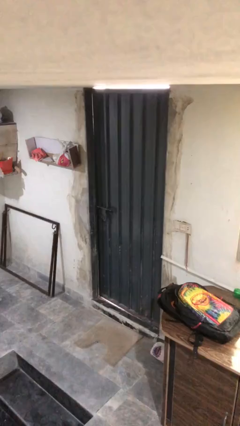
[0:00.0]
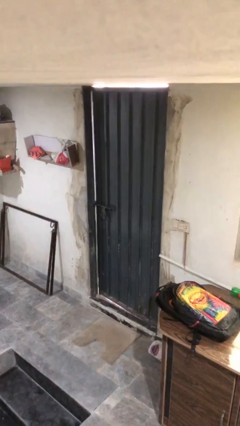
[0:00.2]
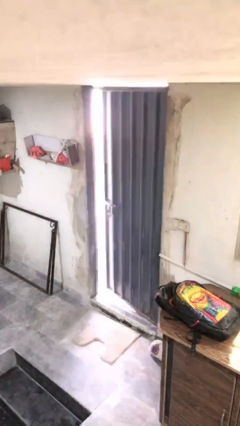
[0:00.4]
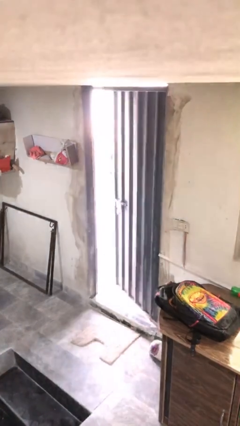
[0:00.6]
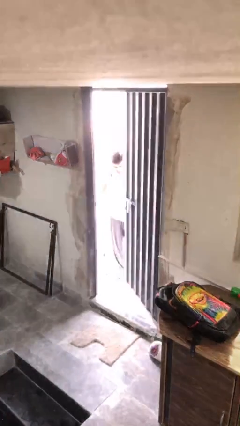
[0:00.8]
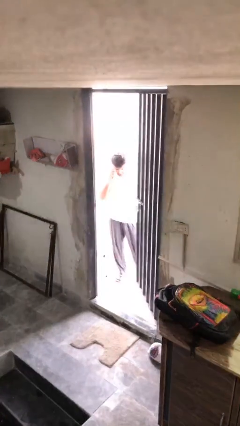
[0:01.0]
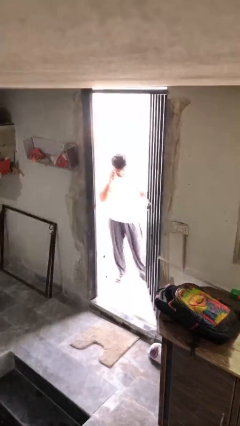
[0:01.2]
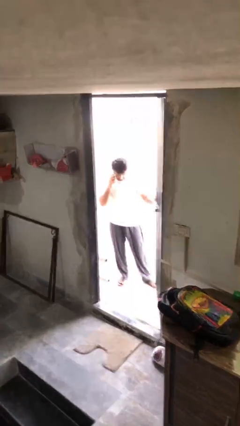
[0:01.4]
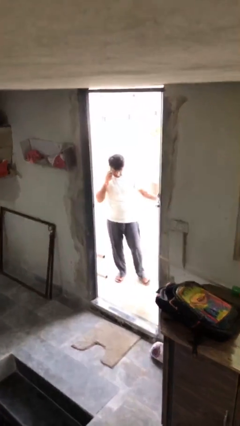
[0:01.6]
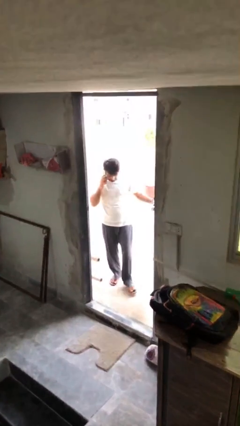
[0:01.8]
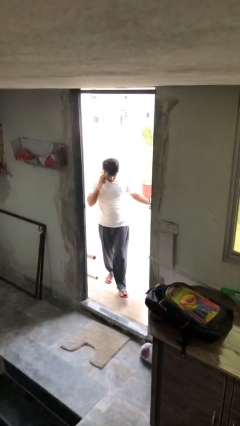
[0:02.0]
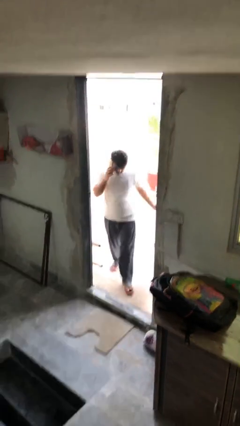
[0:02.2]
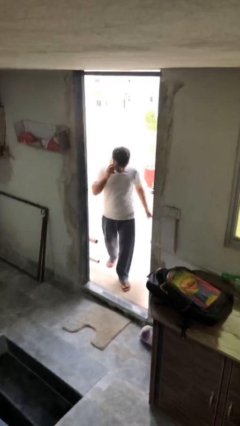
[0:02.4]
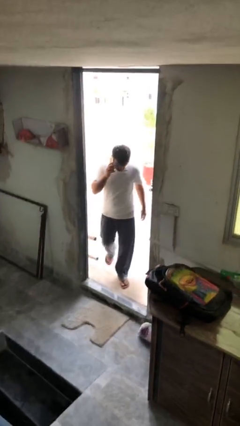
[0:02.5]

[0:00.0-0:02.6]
person opens facility door

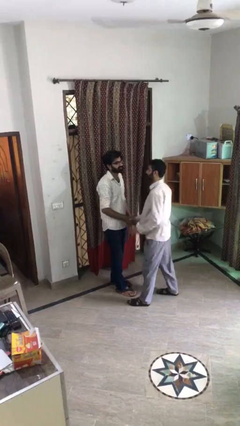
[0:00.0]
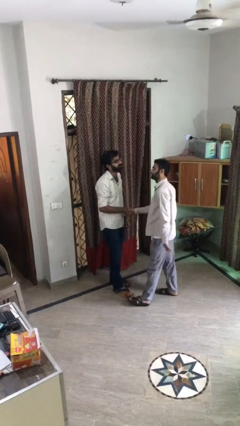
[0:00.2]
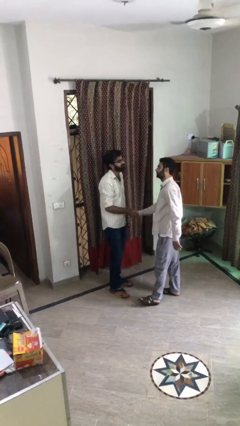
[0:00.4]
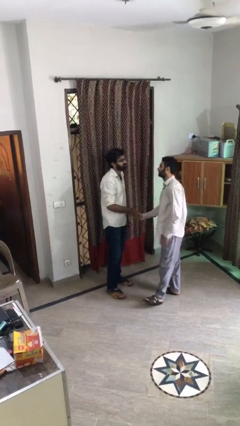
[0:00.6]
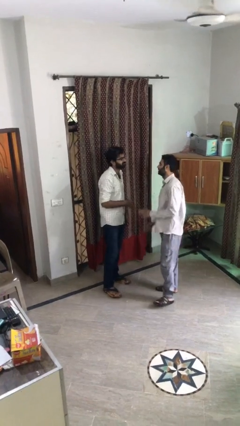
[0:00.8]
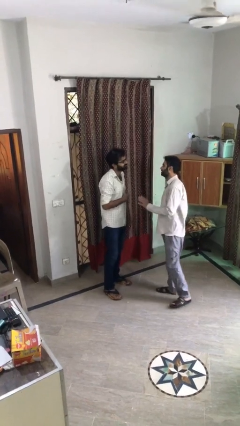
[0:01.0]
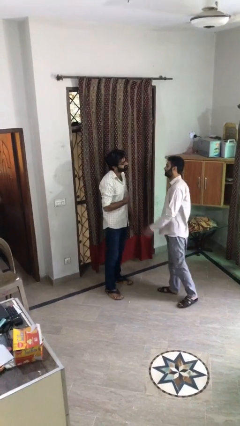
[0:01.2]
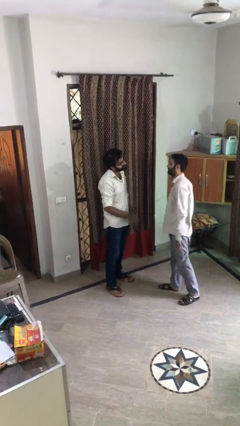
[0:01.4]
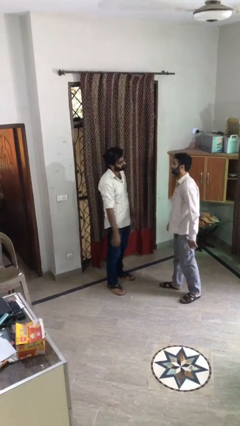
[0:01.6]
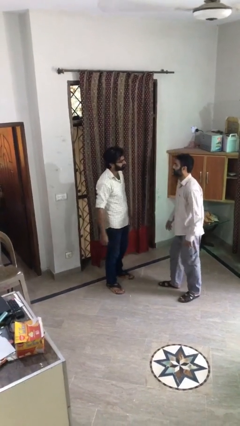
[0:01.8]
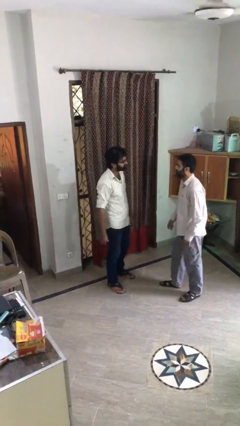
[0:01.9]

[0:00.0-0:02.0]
person talks to person

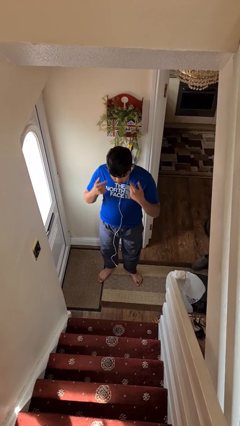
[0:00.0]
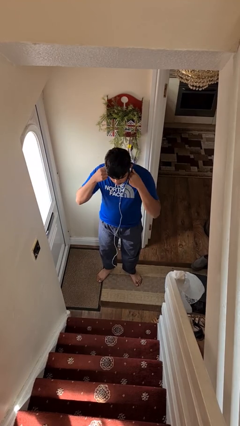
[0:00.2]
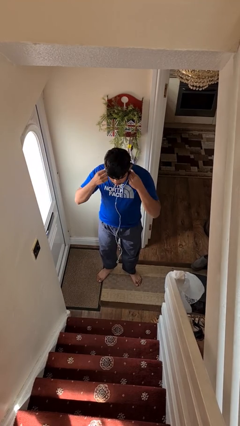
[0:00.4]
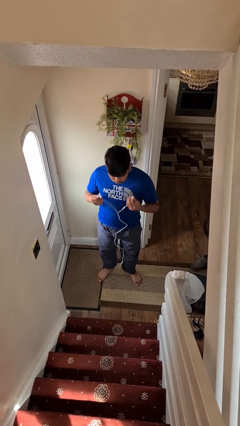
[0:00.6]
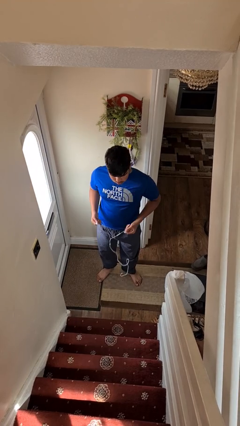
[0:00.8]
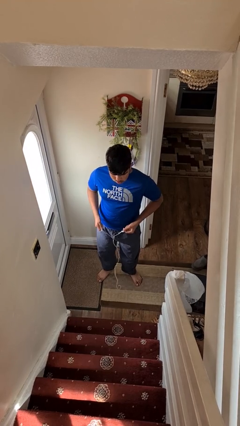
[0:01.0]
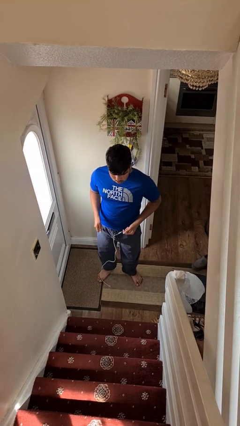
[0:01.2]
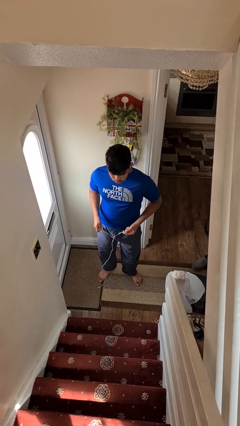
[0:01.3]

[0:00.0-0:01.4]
person takes off headphones

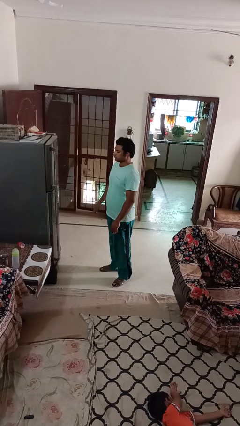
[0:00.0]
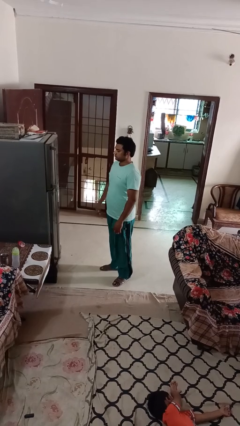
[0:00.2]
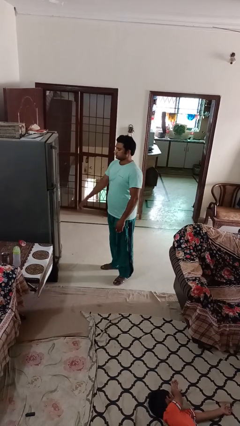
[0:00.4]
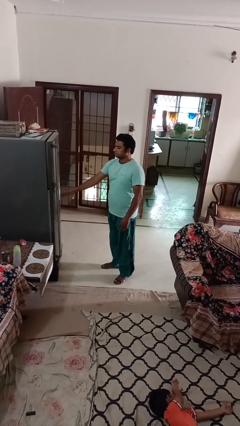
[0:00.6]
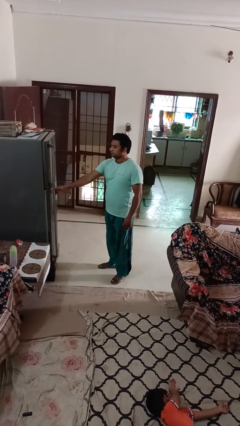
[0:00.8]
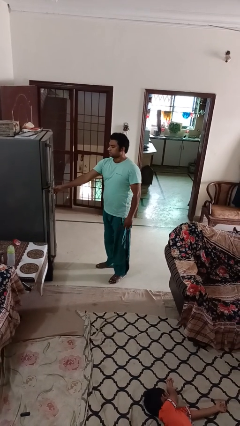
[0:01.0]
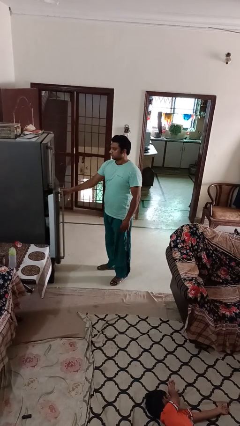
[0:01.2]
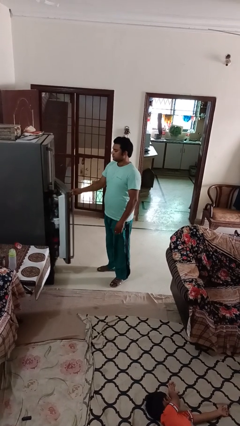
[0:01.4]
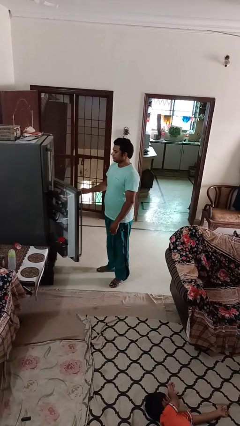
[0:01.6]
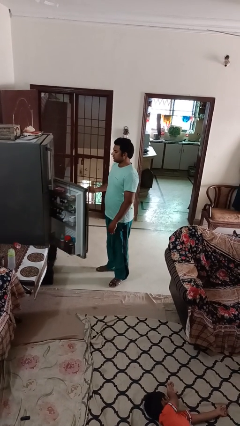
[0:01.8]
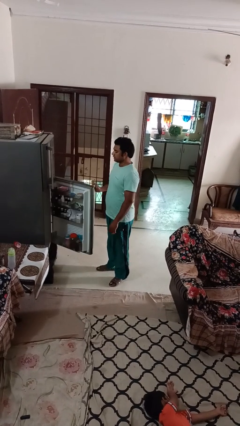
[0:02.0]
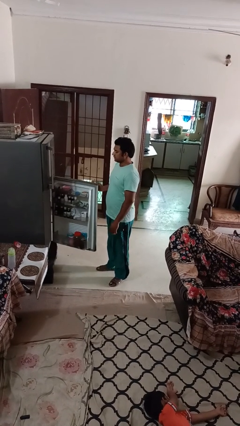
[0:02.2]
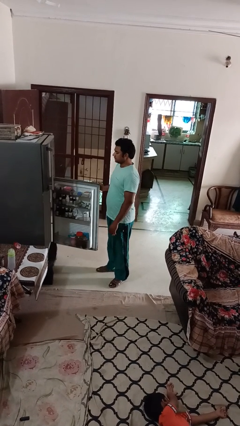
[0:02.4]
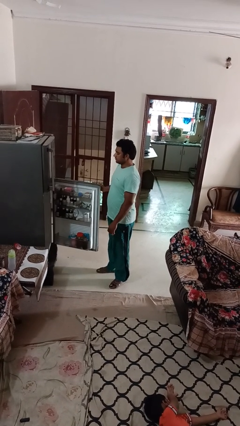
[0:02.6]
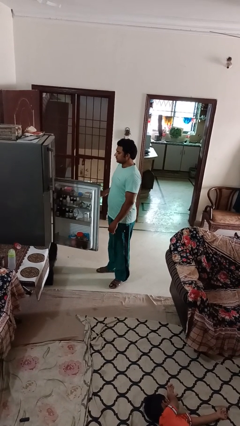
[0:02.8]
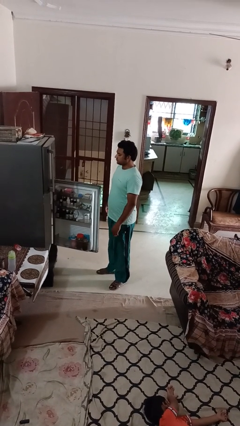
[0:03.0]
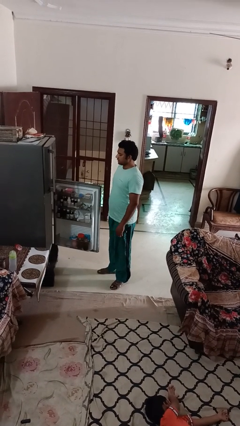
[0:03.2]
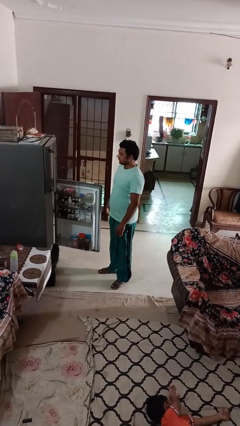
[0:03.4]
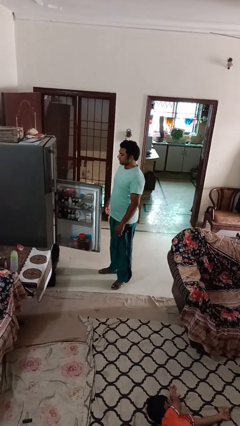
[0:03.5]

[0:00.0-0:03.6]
person opens refrigerator

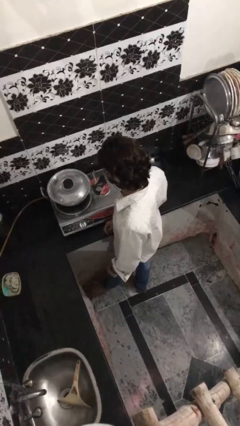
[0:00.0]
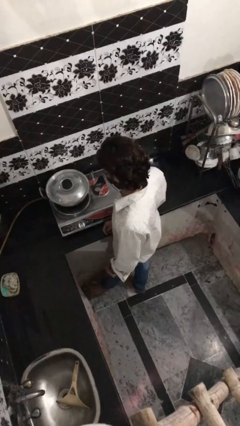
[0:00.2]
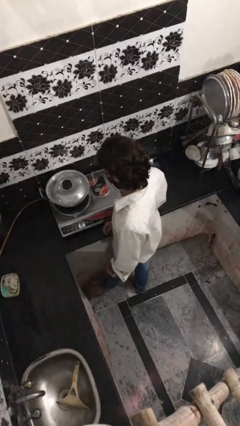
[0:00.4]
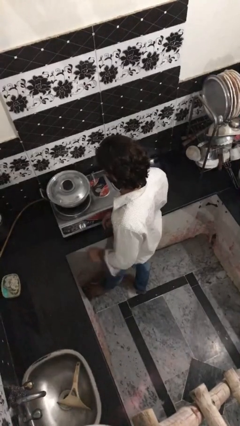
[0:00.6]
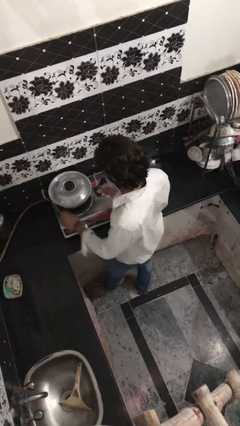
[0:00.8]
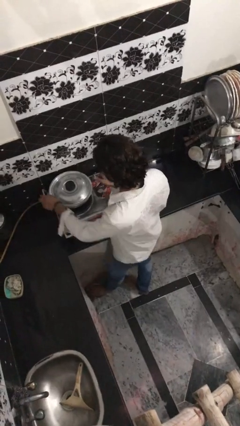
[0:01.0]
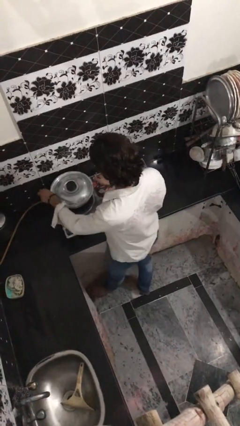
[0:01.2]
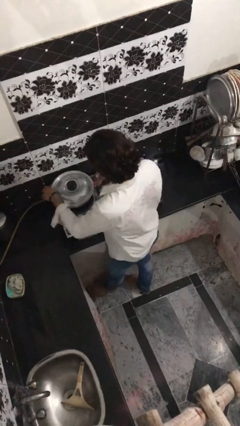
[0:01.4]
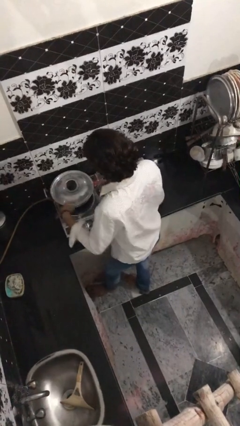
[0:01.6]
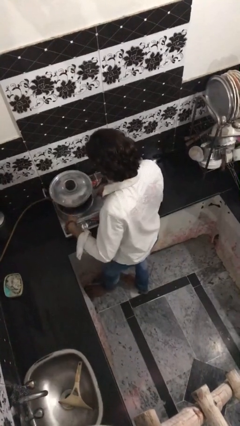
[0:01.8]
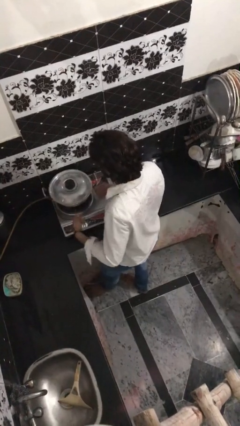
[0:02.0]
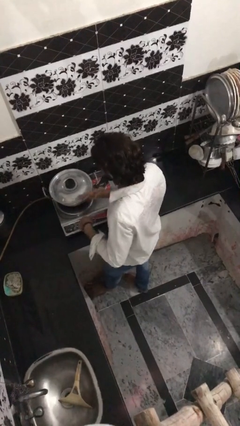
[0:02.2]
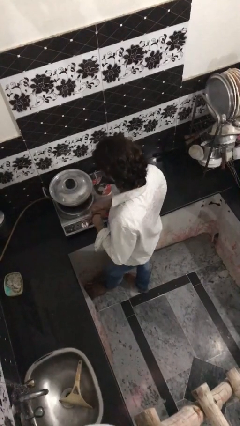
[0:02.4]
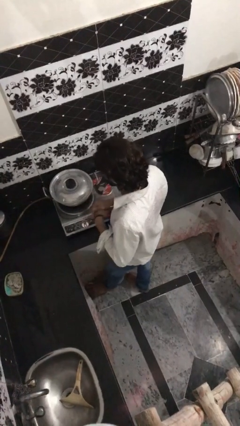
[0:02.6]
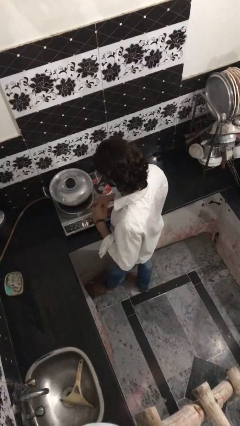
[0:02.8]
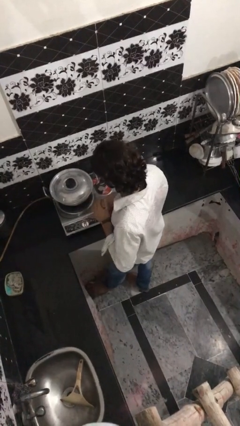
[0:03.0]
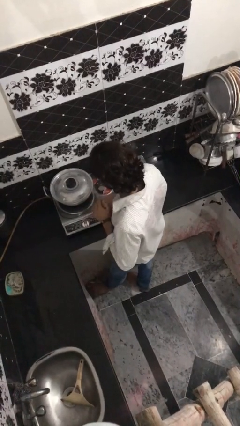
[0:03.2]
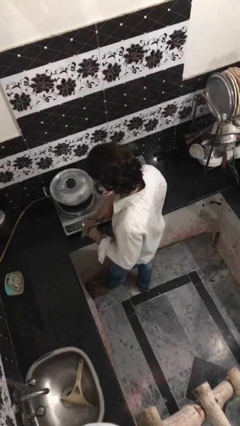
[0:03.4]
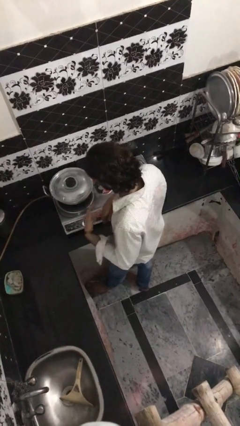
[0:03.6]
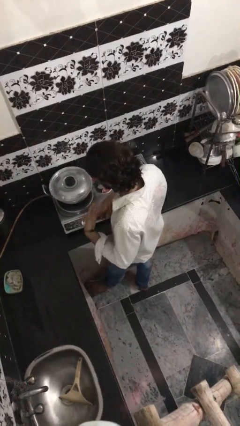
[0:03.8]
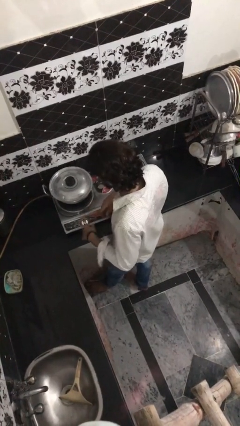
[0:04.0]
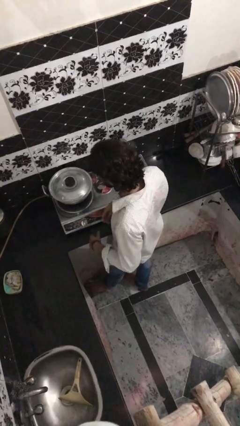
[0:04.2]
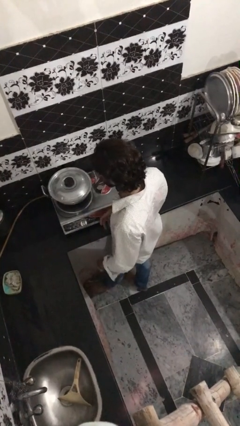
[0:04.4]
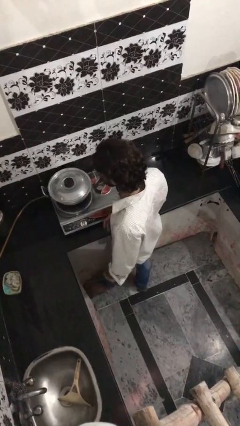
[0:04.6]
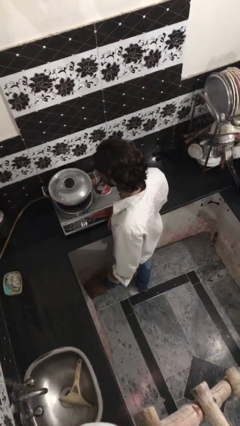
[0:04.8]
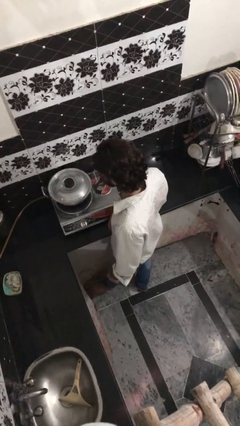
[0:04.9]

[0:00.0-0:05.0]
person burns hand

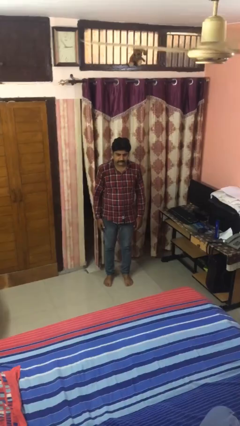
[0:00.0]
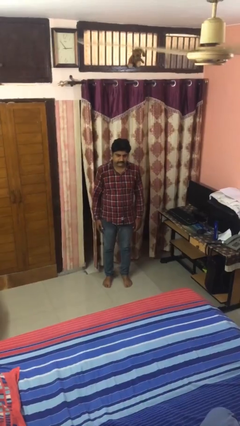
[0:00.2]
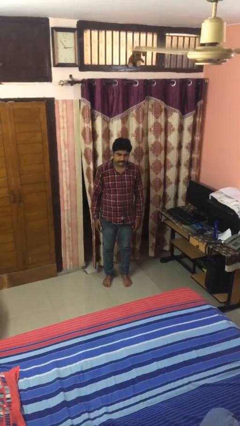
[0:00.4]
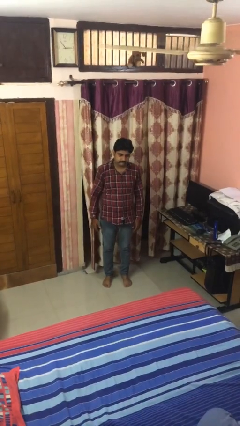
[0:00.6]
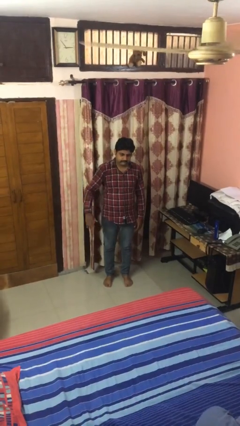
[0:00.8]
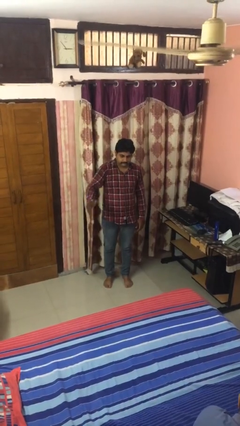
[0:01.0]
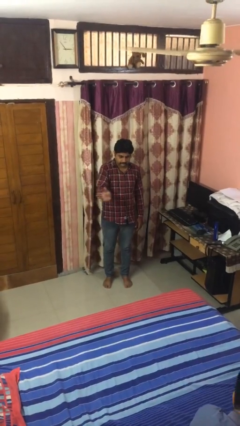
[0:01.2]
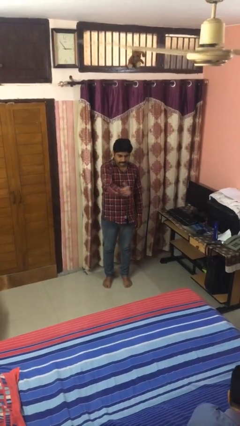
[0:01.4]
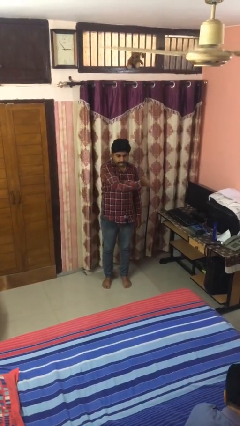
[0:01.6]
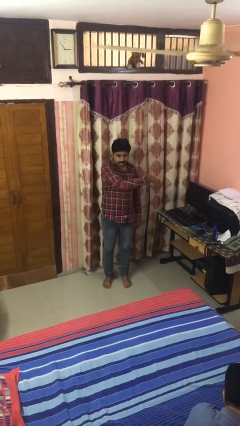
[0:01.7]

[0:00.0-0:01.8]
person gestures swipe left

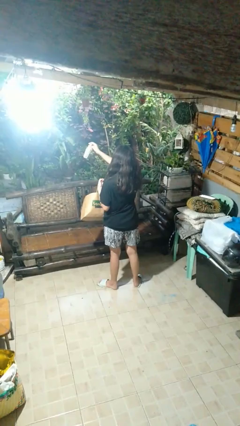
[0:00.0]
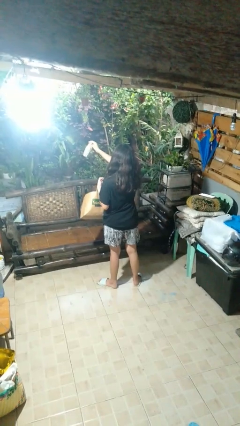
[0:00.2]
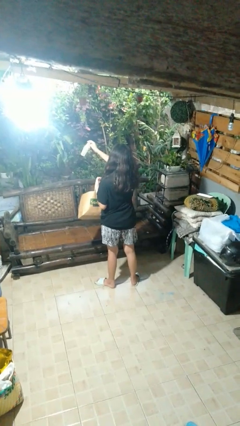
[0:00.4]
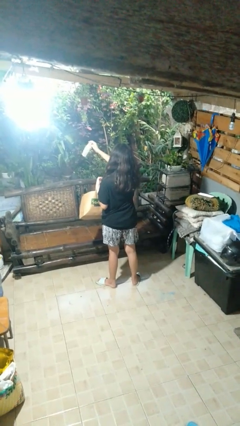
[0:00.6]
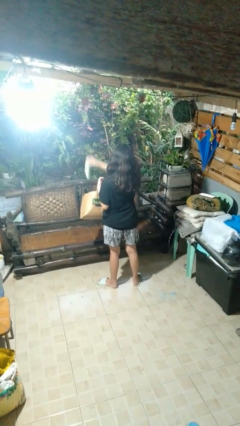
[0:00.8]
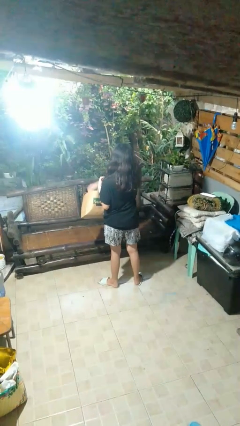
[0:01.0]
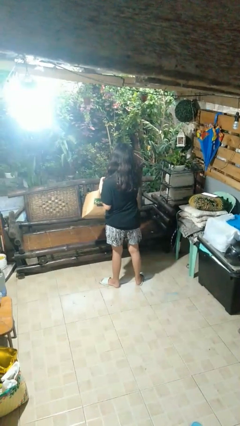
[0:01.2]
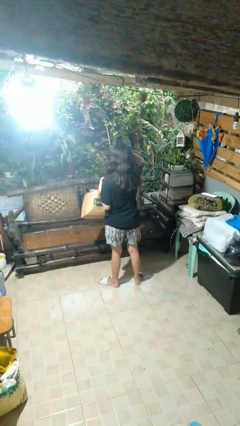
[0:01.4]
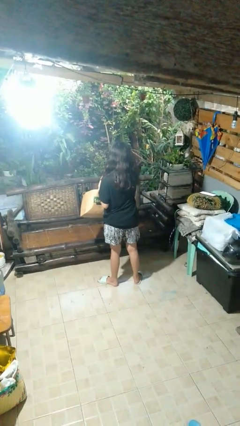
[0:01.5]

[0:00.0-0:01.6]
person puts object into bag
